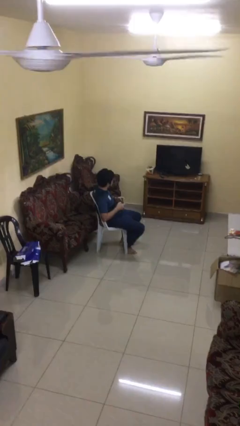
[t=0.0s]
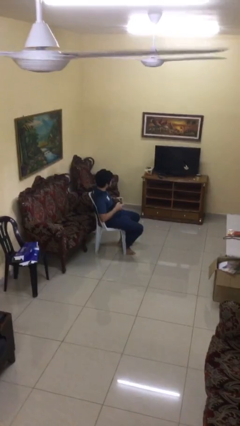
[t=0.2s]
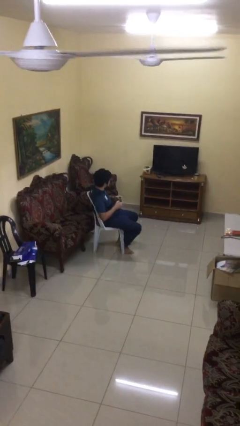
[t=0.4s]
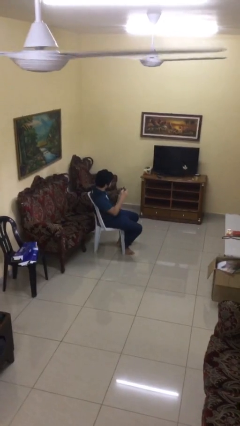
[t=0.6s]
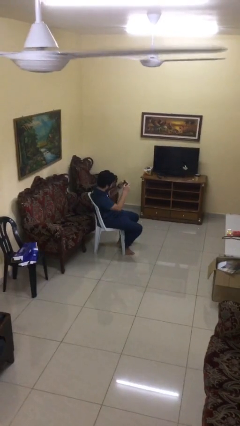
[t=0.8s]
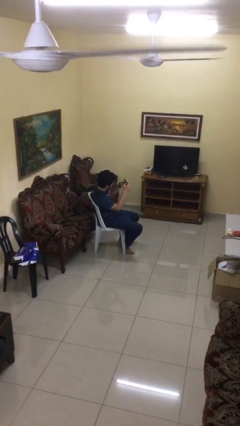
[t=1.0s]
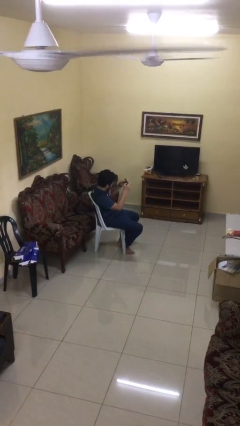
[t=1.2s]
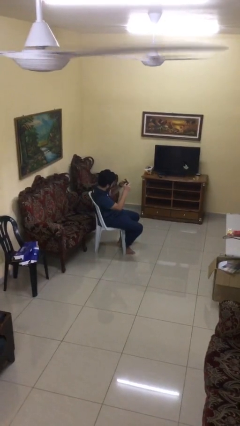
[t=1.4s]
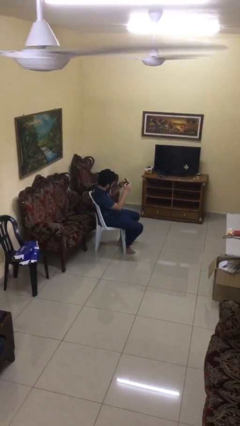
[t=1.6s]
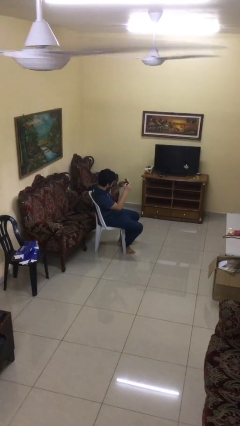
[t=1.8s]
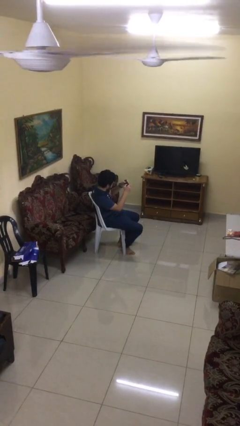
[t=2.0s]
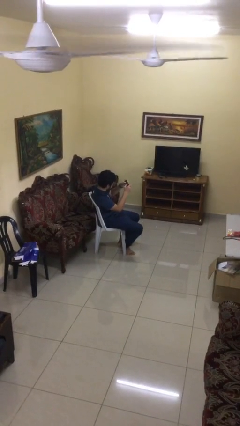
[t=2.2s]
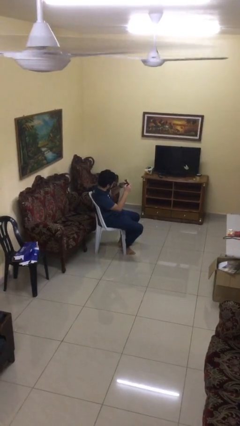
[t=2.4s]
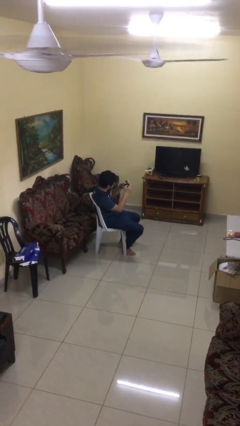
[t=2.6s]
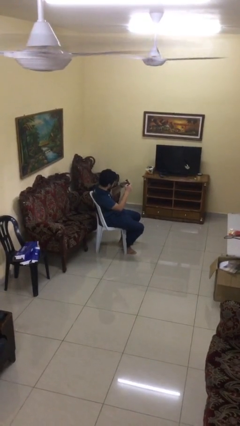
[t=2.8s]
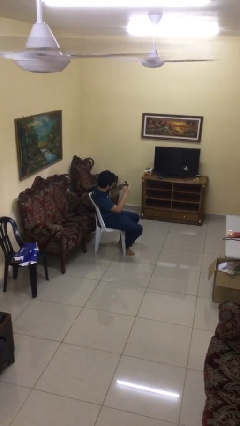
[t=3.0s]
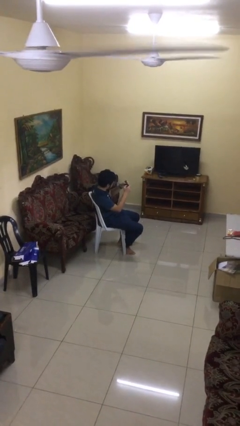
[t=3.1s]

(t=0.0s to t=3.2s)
person interacts with handheld game

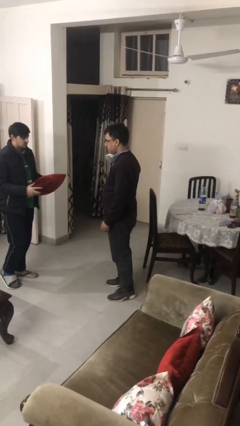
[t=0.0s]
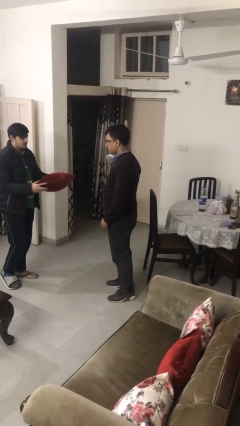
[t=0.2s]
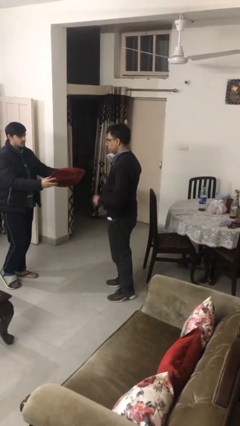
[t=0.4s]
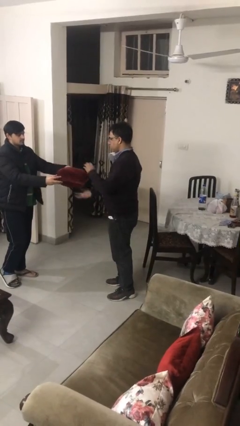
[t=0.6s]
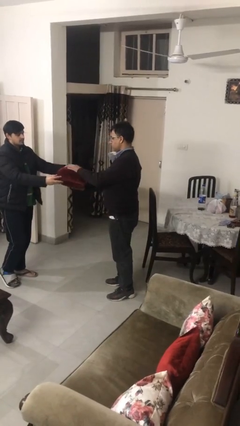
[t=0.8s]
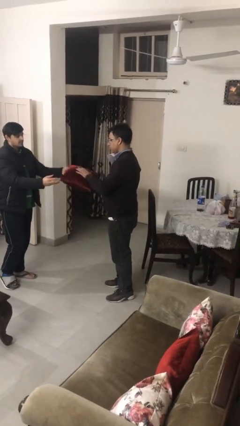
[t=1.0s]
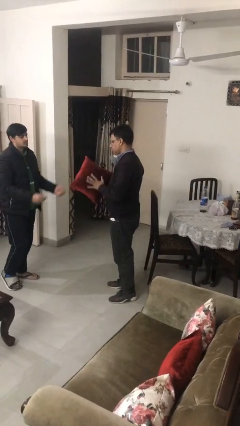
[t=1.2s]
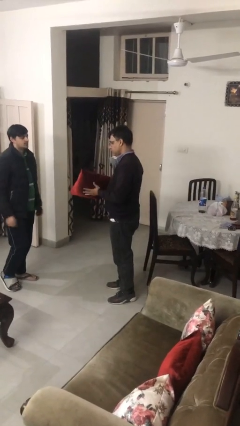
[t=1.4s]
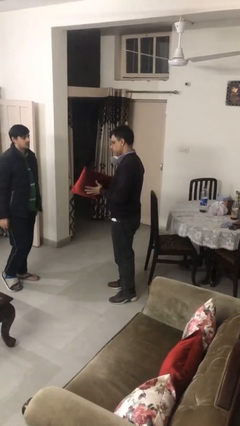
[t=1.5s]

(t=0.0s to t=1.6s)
person transfers object to person

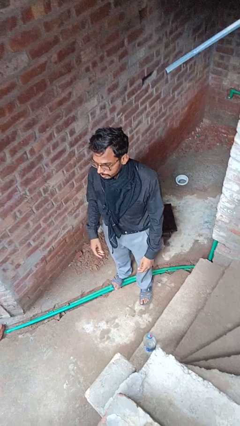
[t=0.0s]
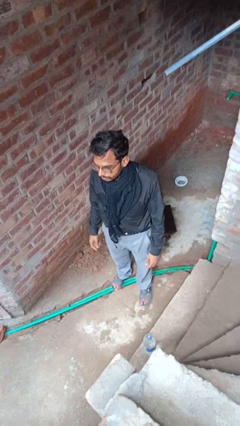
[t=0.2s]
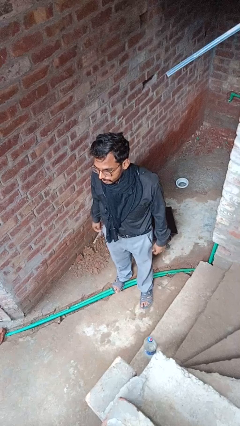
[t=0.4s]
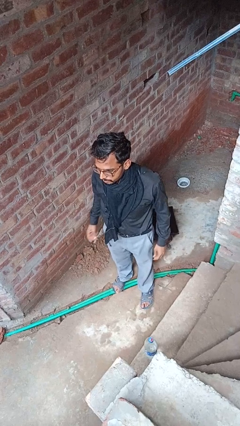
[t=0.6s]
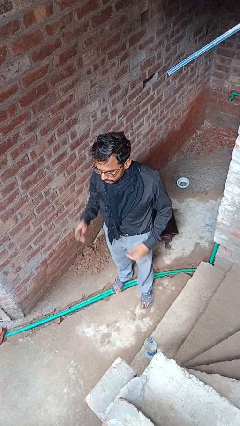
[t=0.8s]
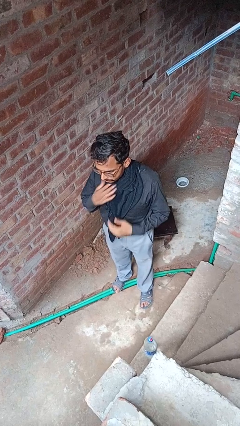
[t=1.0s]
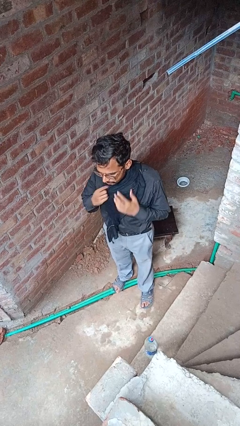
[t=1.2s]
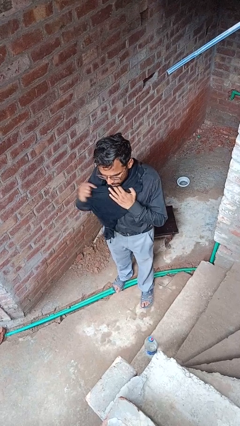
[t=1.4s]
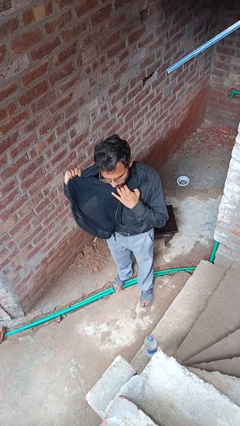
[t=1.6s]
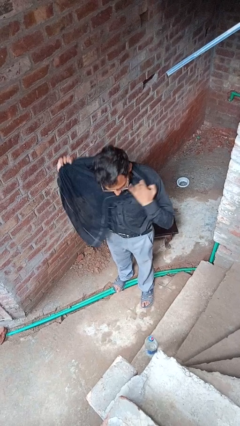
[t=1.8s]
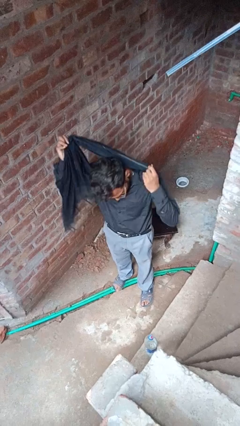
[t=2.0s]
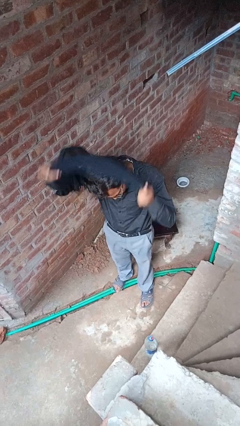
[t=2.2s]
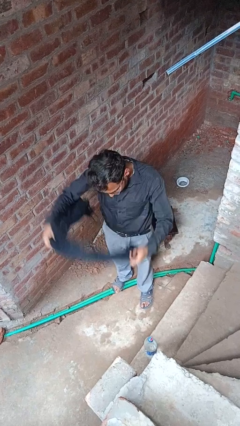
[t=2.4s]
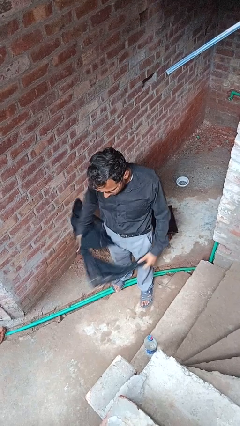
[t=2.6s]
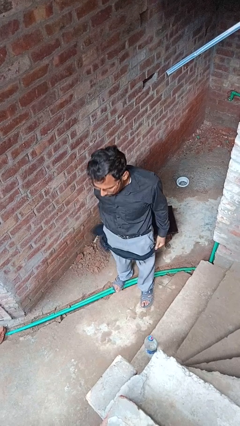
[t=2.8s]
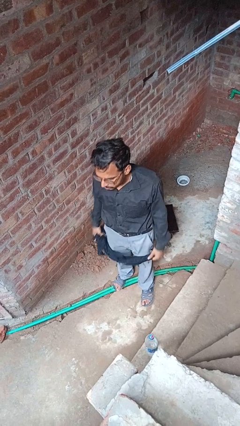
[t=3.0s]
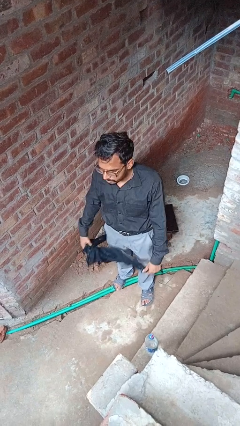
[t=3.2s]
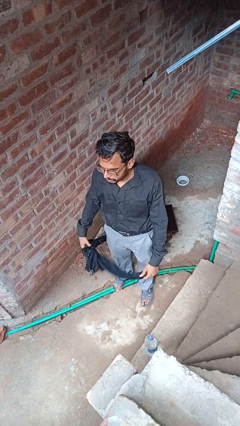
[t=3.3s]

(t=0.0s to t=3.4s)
person takes off scarf

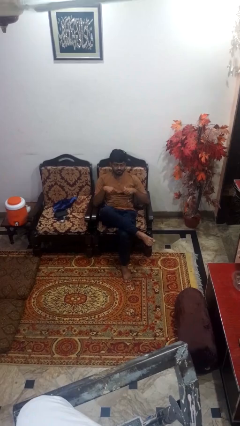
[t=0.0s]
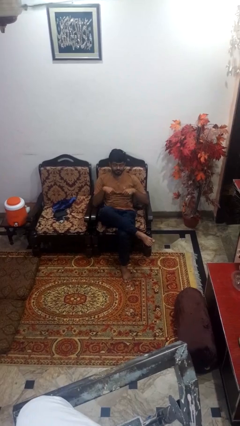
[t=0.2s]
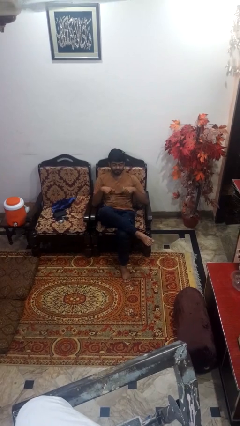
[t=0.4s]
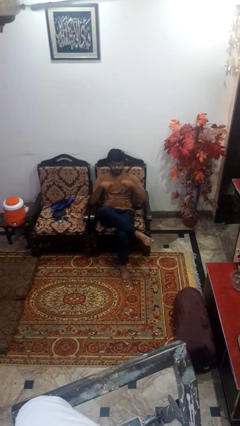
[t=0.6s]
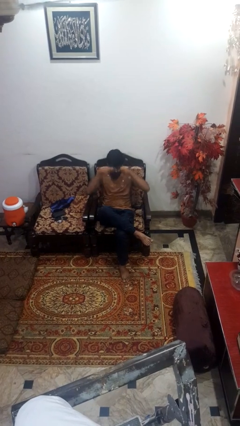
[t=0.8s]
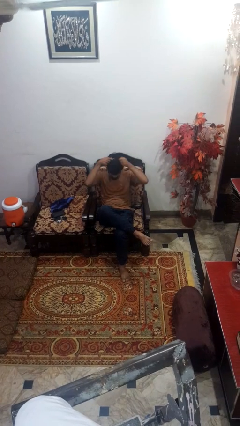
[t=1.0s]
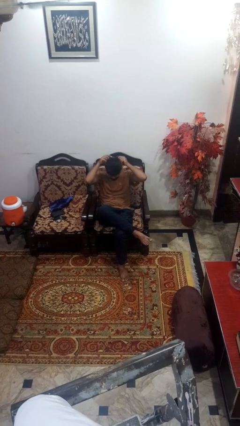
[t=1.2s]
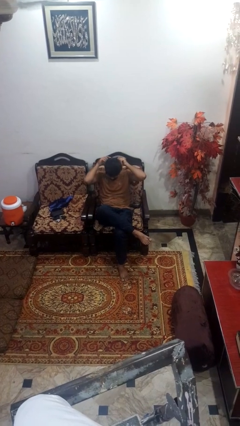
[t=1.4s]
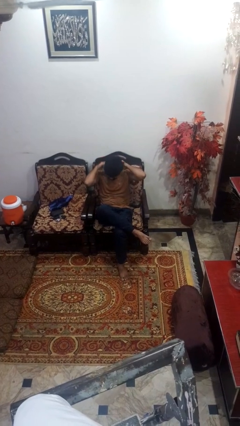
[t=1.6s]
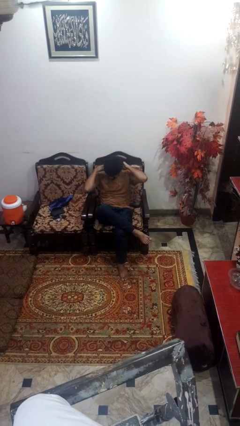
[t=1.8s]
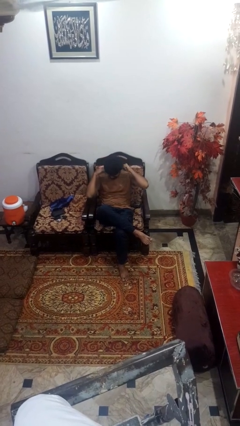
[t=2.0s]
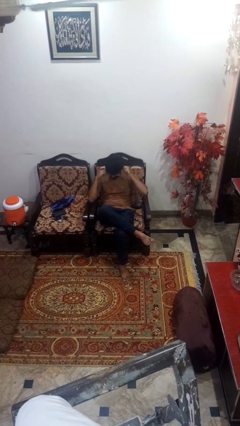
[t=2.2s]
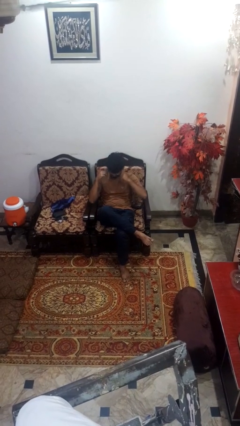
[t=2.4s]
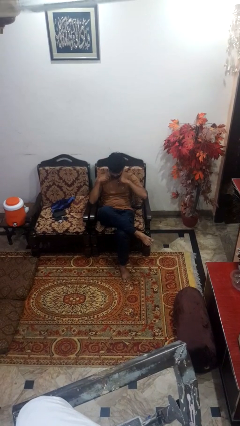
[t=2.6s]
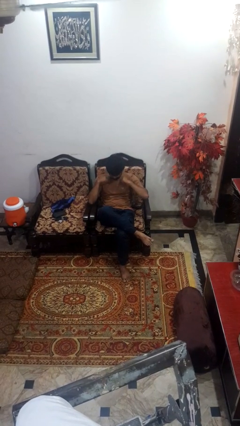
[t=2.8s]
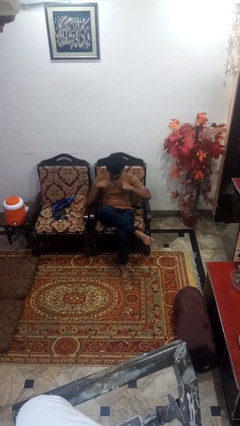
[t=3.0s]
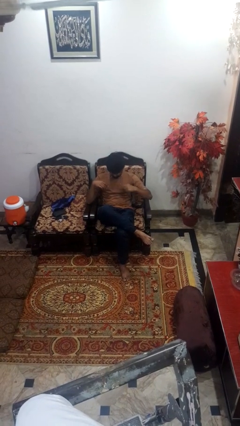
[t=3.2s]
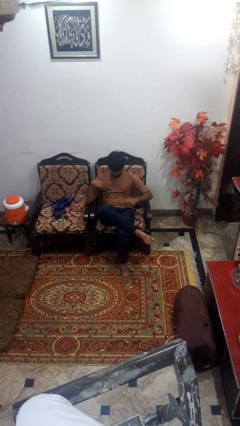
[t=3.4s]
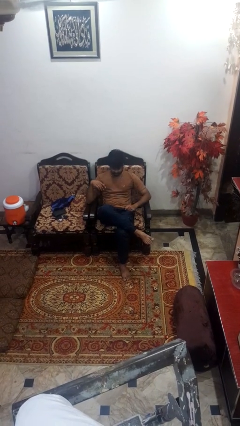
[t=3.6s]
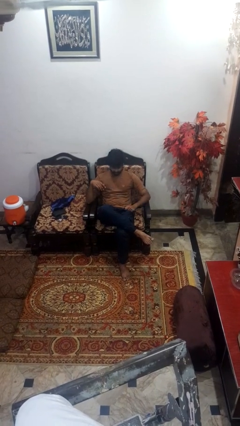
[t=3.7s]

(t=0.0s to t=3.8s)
person puts on necklace

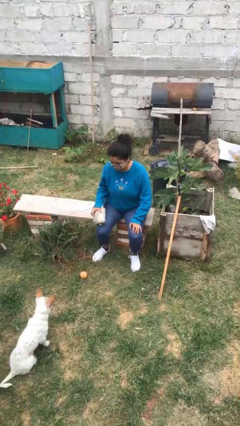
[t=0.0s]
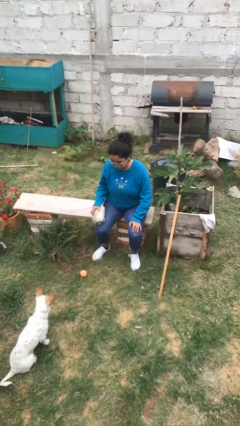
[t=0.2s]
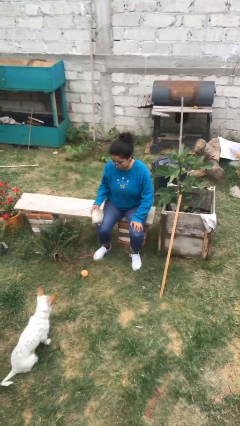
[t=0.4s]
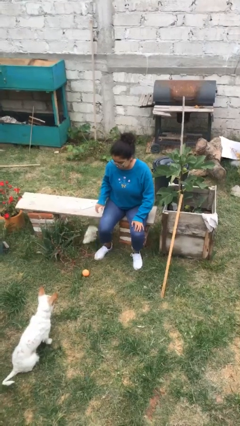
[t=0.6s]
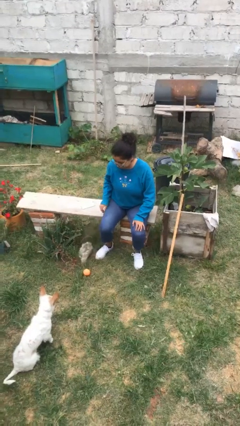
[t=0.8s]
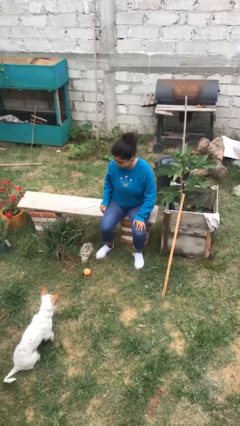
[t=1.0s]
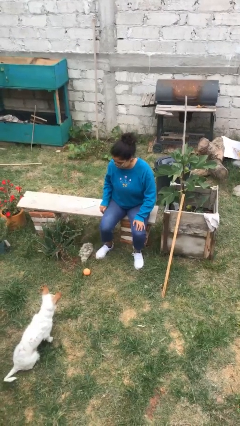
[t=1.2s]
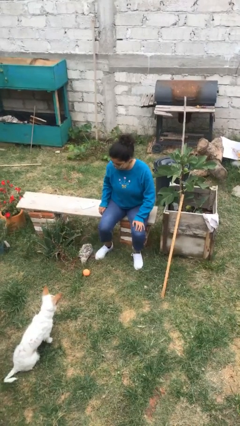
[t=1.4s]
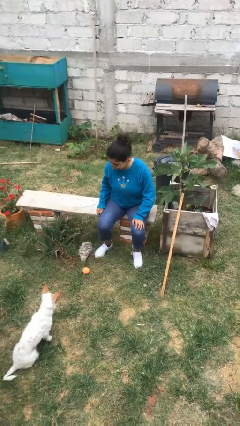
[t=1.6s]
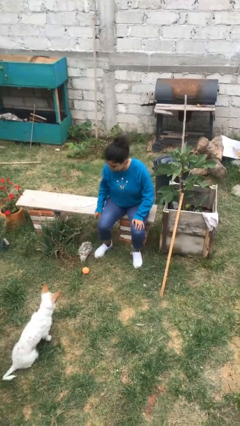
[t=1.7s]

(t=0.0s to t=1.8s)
person drops object

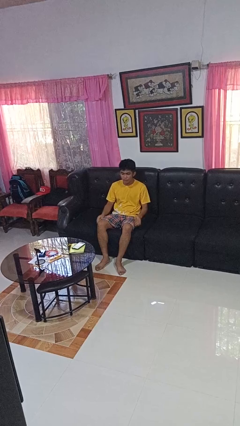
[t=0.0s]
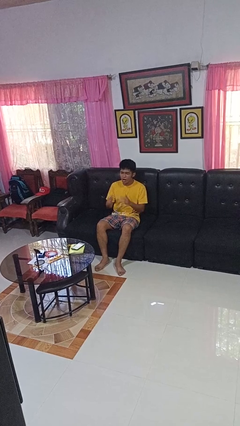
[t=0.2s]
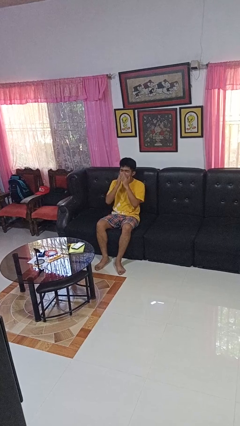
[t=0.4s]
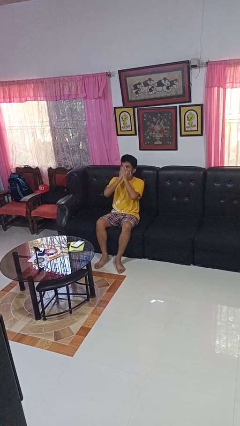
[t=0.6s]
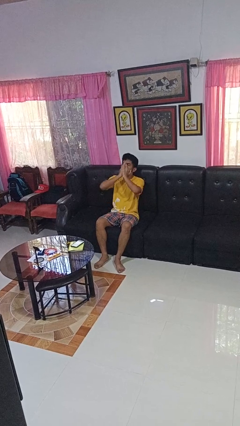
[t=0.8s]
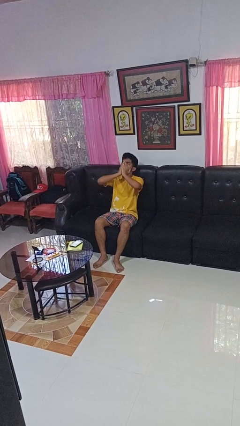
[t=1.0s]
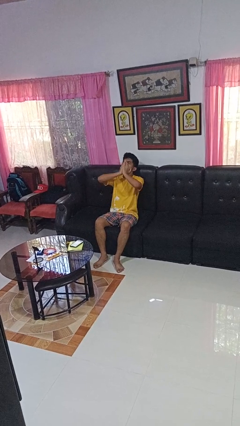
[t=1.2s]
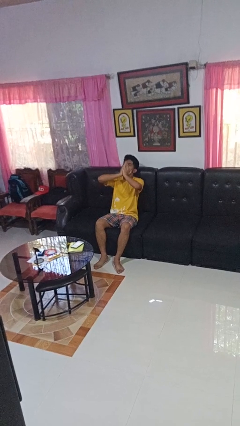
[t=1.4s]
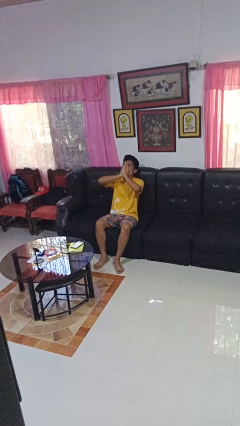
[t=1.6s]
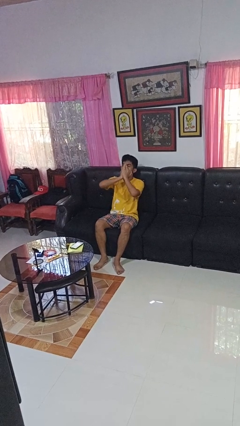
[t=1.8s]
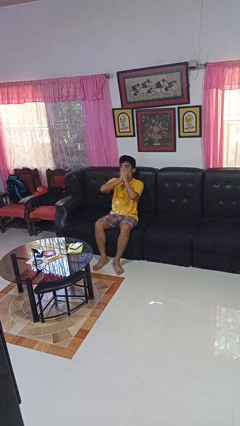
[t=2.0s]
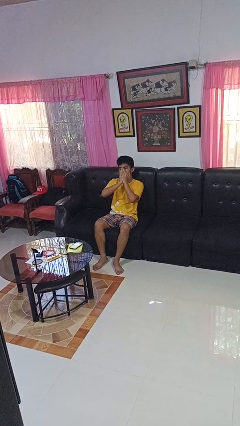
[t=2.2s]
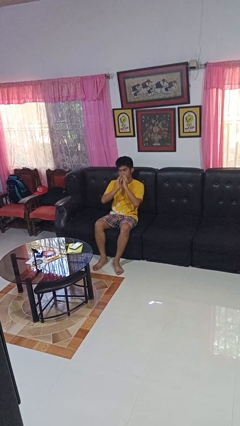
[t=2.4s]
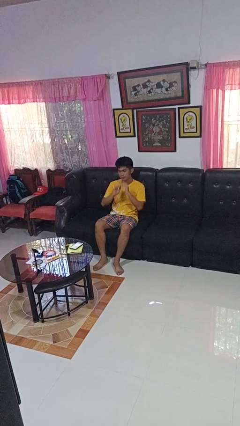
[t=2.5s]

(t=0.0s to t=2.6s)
person yawns

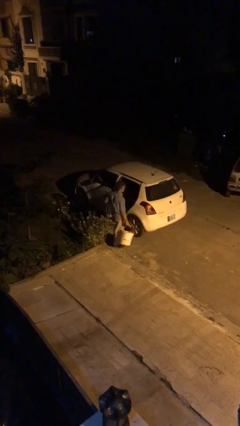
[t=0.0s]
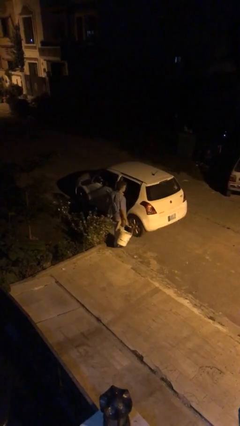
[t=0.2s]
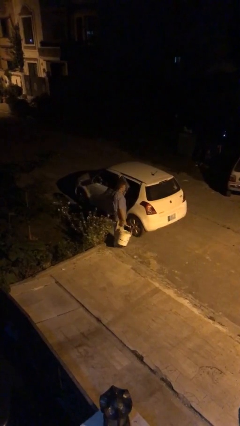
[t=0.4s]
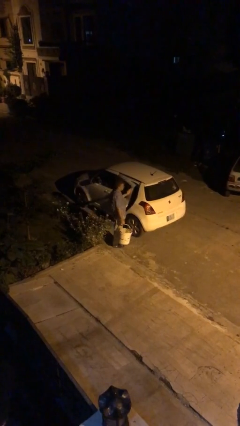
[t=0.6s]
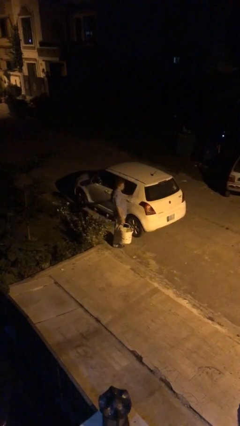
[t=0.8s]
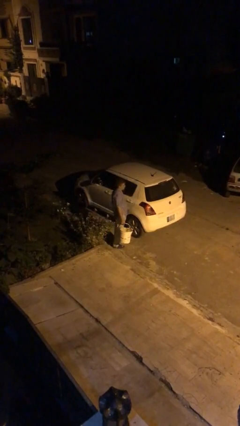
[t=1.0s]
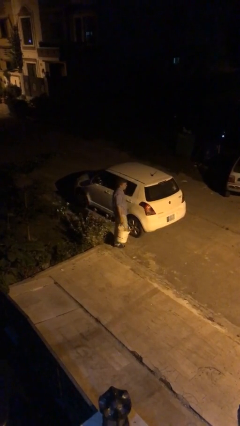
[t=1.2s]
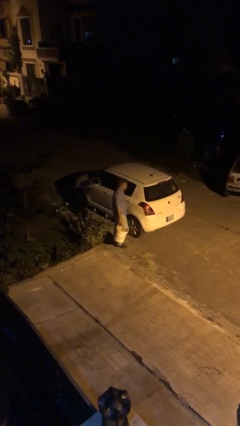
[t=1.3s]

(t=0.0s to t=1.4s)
person closes car door
